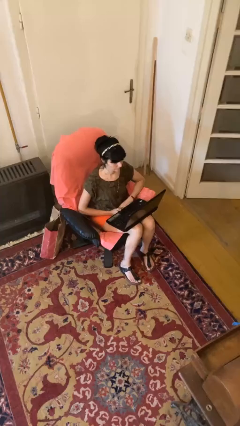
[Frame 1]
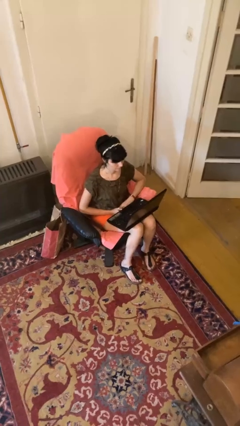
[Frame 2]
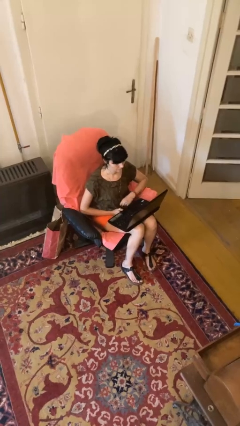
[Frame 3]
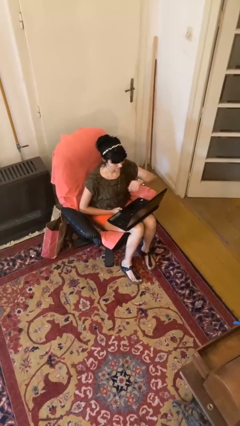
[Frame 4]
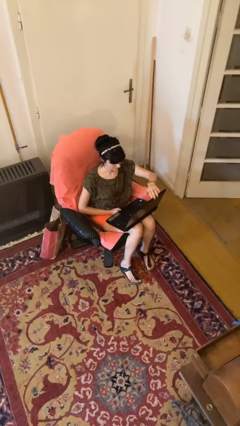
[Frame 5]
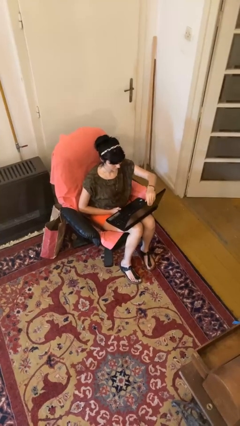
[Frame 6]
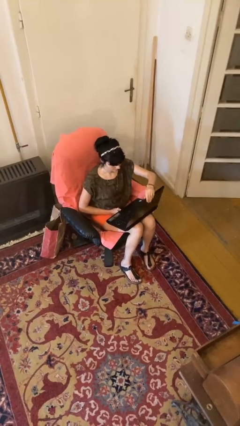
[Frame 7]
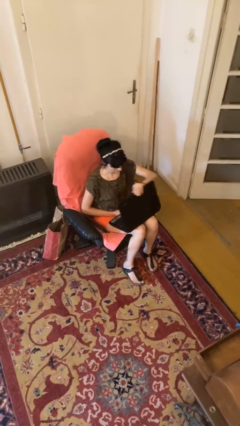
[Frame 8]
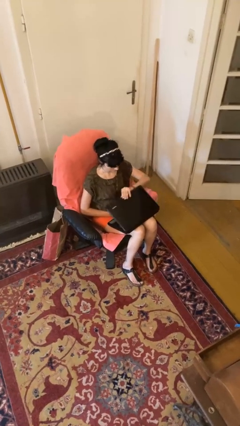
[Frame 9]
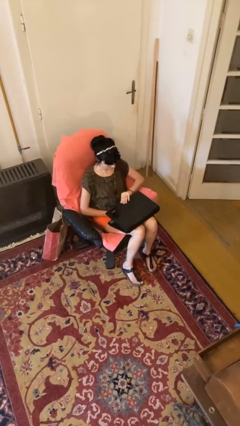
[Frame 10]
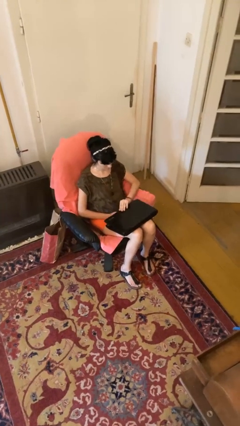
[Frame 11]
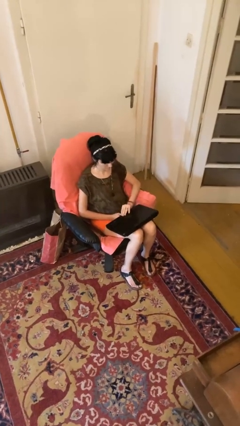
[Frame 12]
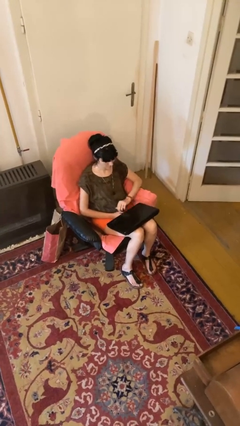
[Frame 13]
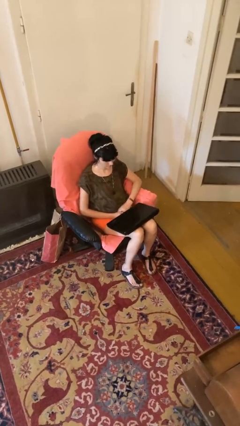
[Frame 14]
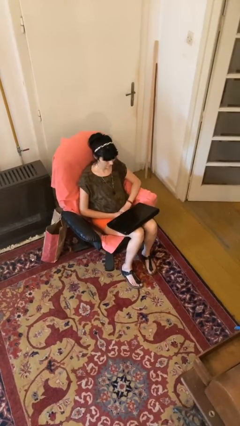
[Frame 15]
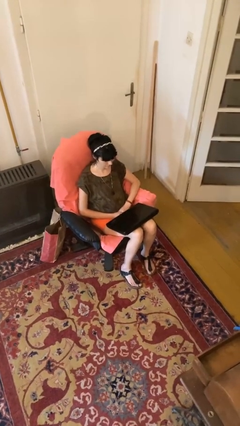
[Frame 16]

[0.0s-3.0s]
person closes laptop

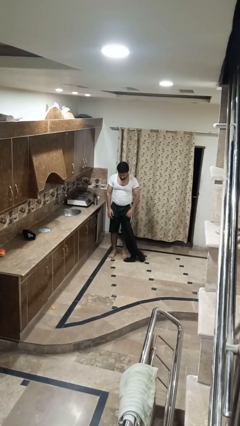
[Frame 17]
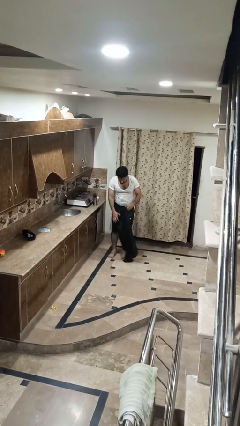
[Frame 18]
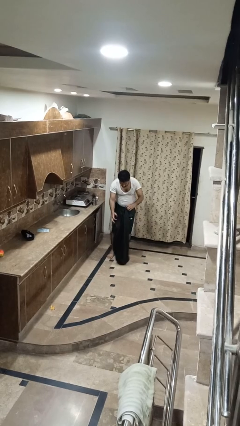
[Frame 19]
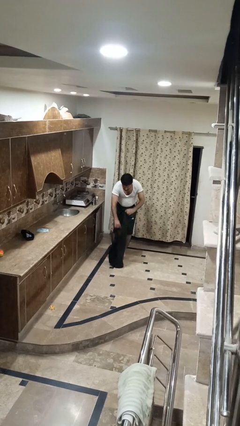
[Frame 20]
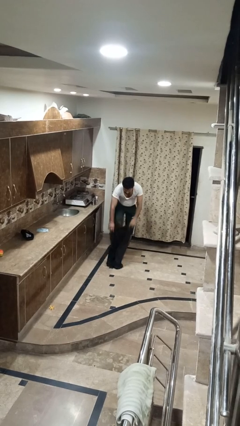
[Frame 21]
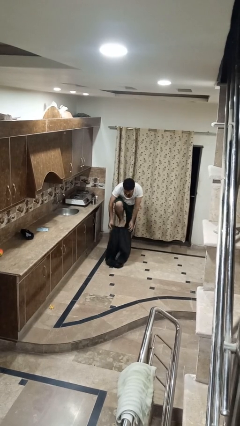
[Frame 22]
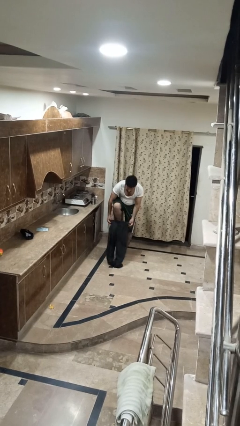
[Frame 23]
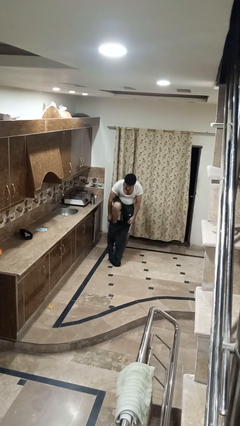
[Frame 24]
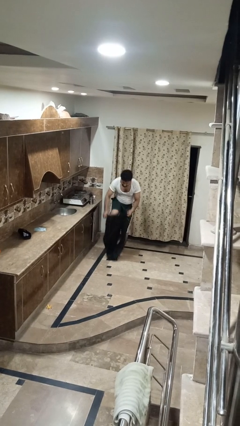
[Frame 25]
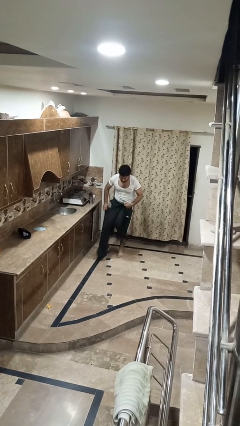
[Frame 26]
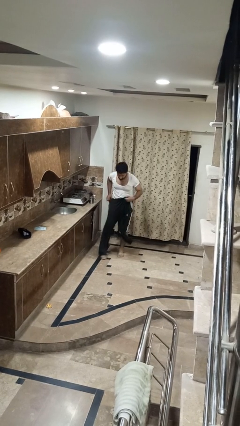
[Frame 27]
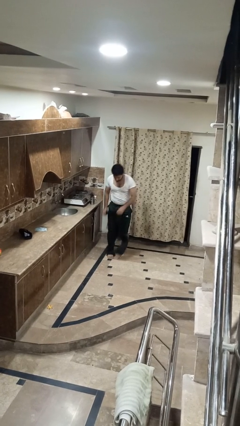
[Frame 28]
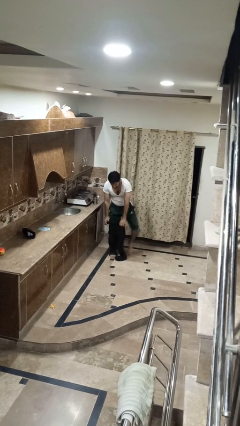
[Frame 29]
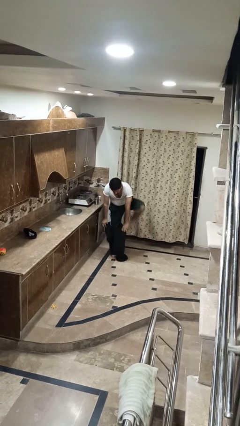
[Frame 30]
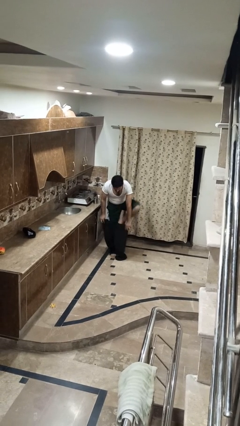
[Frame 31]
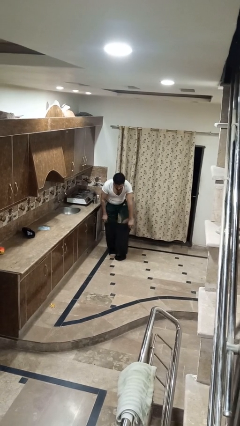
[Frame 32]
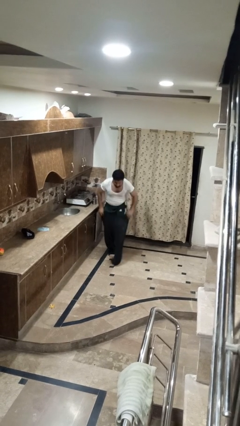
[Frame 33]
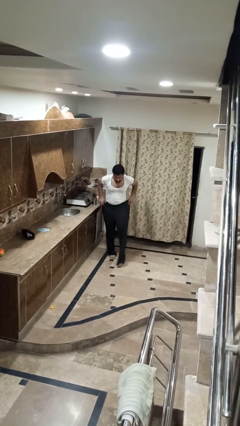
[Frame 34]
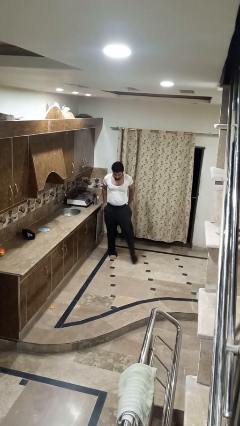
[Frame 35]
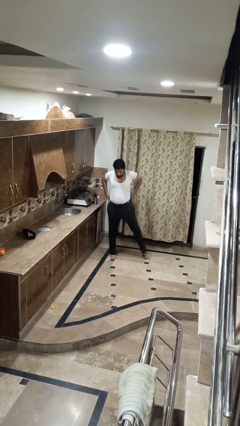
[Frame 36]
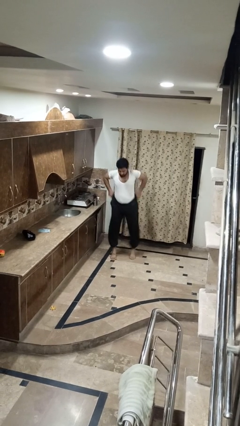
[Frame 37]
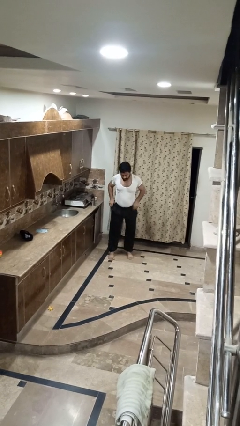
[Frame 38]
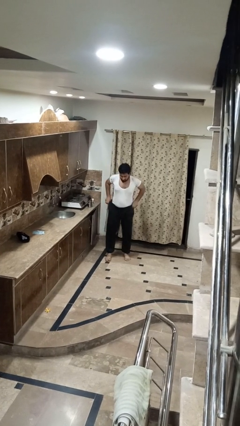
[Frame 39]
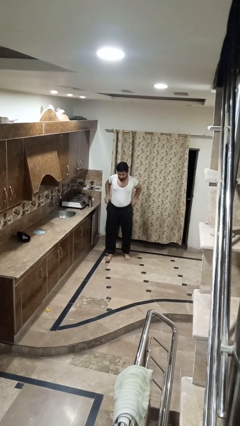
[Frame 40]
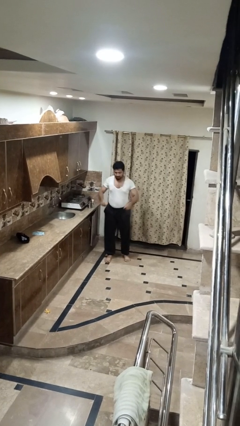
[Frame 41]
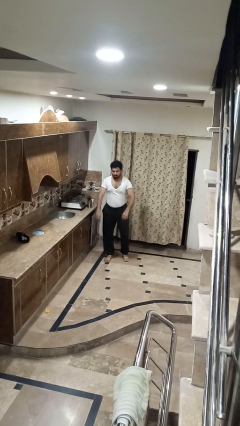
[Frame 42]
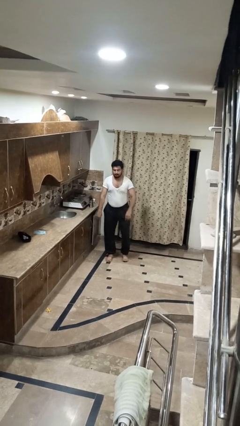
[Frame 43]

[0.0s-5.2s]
person puts on pants

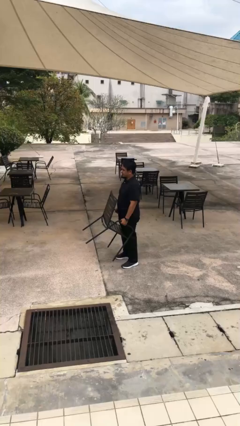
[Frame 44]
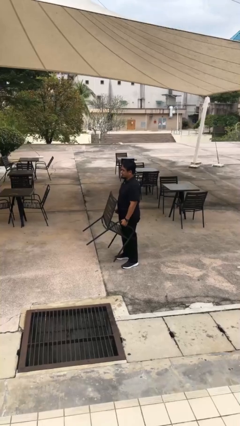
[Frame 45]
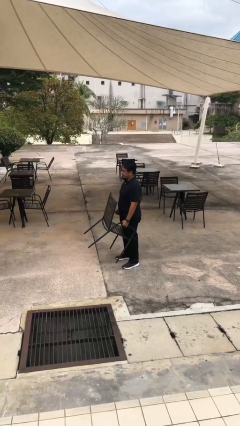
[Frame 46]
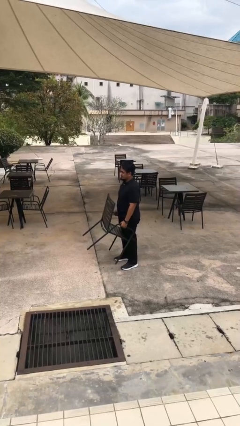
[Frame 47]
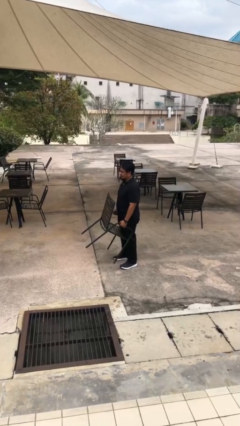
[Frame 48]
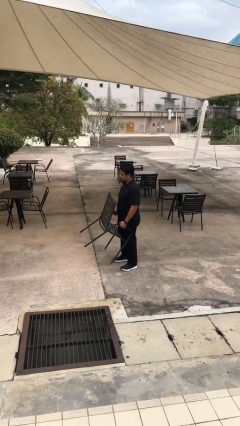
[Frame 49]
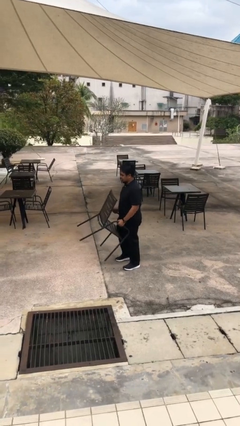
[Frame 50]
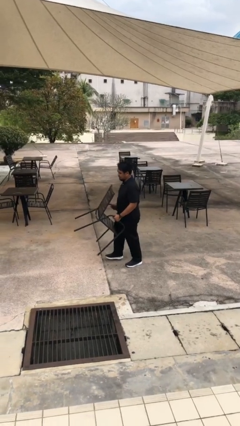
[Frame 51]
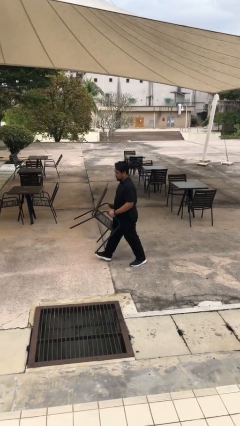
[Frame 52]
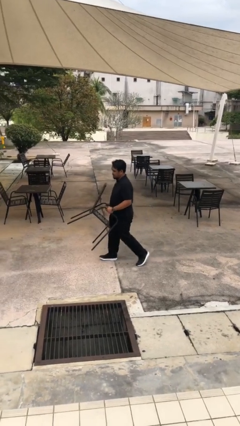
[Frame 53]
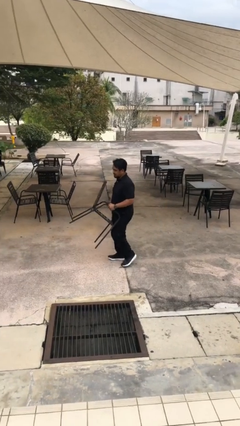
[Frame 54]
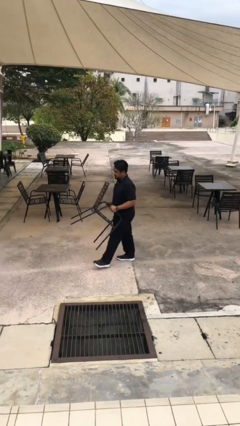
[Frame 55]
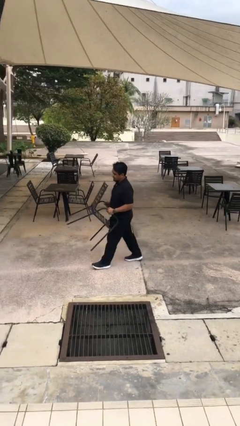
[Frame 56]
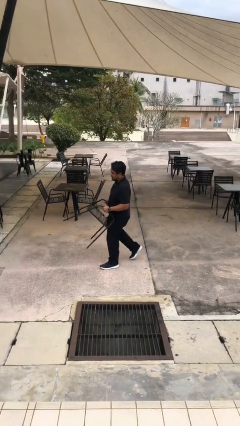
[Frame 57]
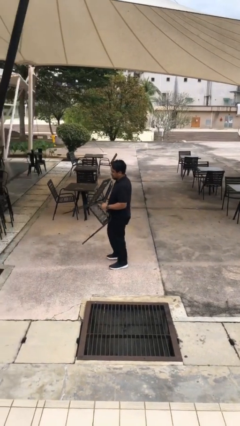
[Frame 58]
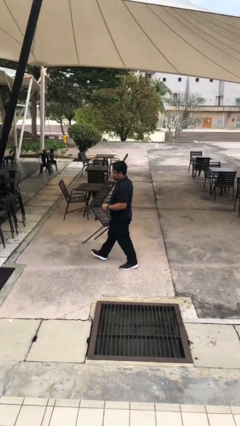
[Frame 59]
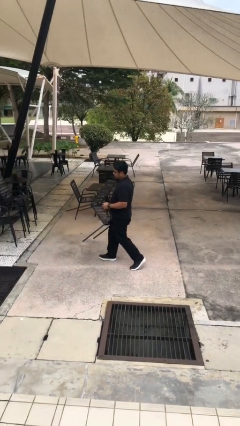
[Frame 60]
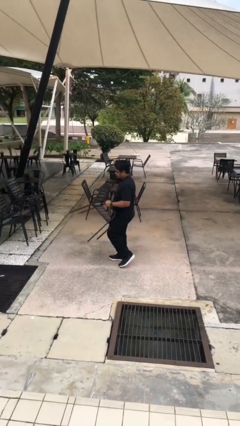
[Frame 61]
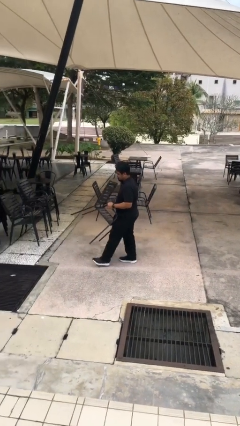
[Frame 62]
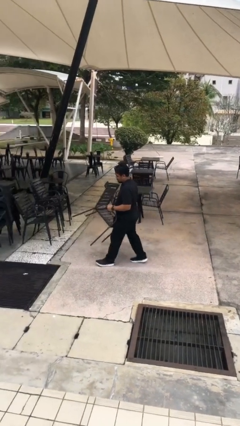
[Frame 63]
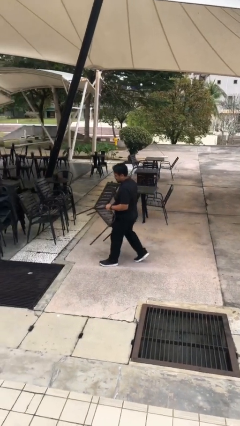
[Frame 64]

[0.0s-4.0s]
person carries heavy object

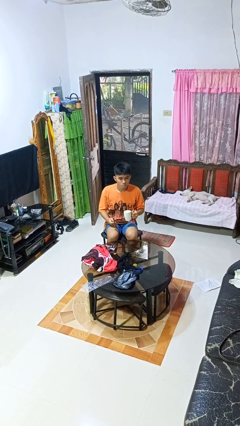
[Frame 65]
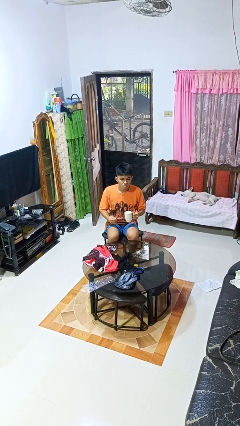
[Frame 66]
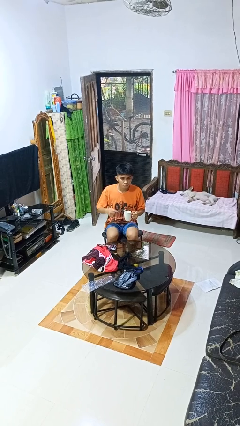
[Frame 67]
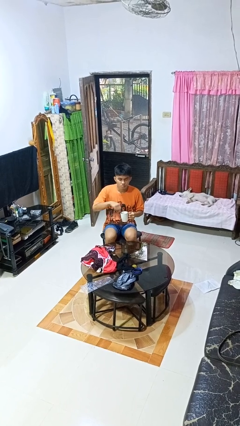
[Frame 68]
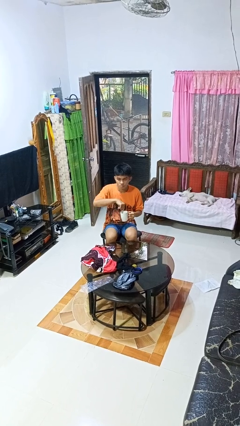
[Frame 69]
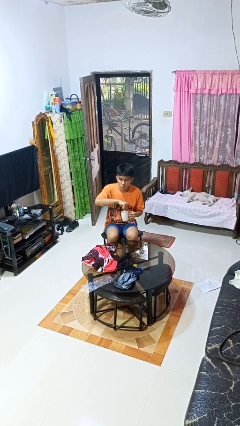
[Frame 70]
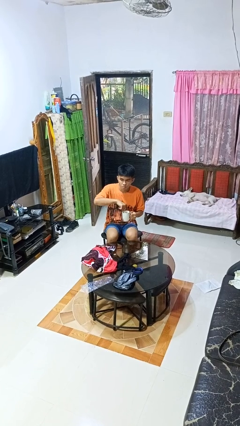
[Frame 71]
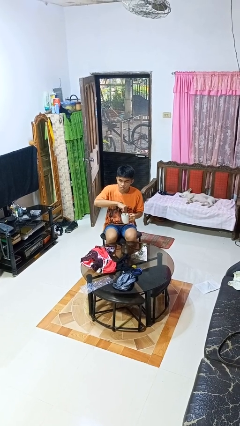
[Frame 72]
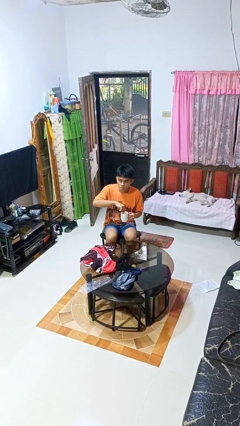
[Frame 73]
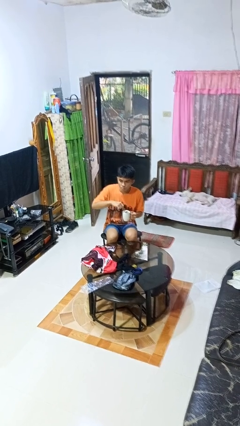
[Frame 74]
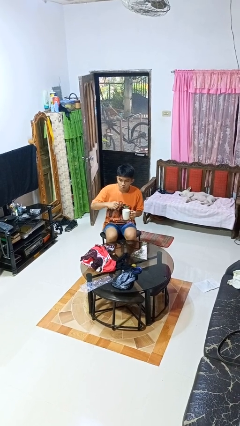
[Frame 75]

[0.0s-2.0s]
person stirs mug

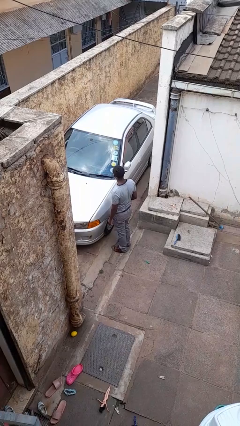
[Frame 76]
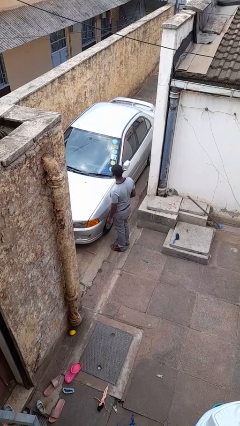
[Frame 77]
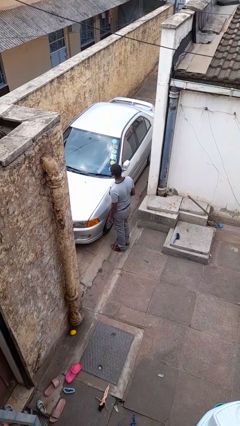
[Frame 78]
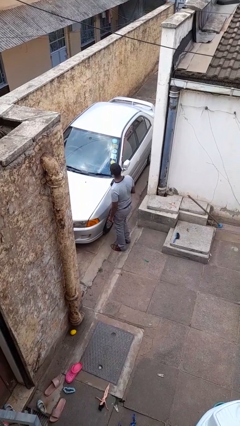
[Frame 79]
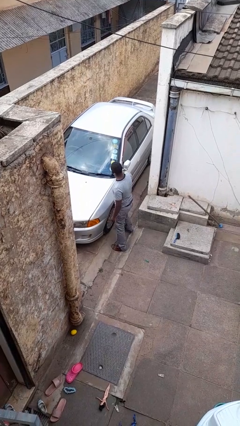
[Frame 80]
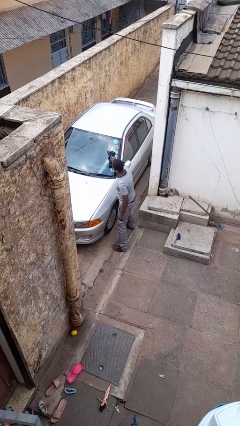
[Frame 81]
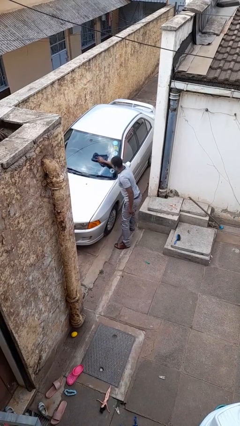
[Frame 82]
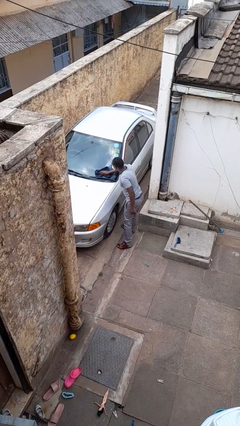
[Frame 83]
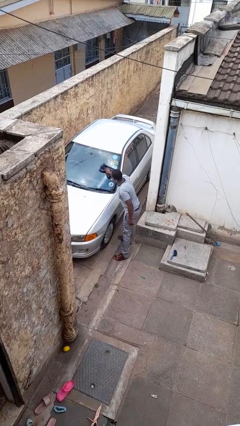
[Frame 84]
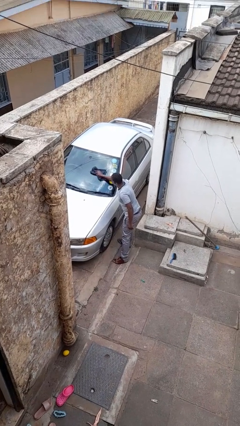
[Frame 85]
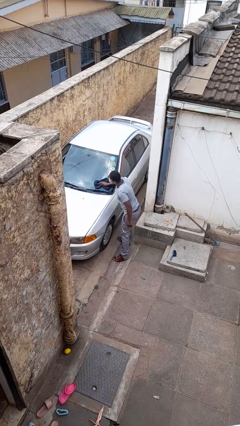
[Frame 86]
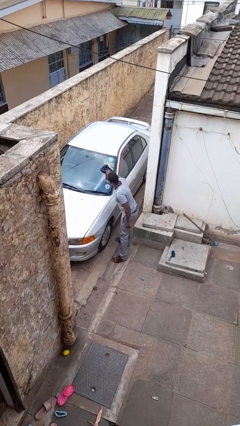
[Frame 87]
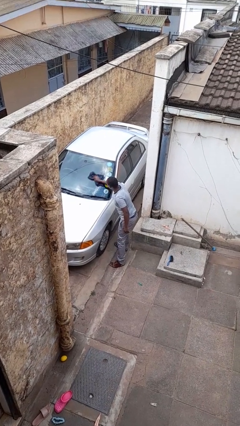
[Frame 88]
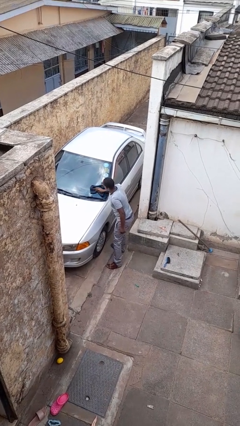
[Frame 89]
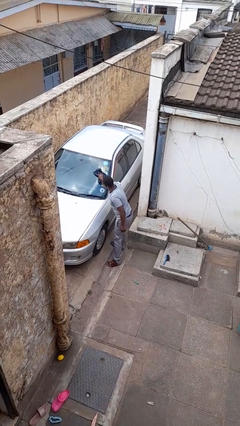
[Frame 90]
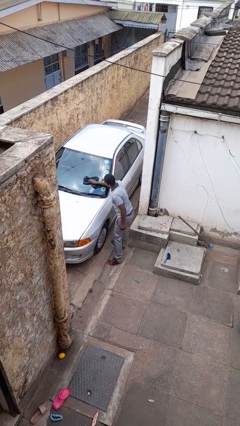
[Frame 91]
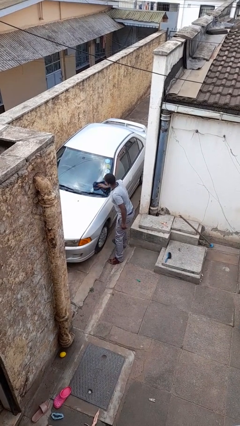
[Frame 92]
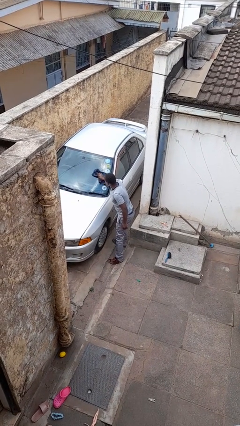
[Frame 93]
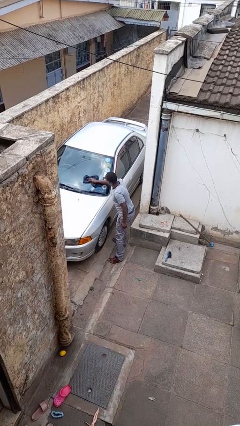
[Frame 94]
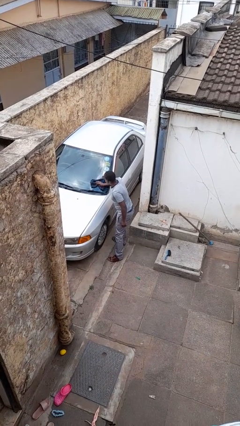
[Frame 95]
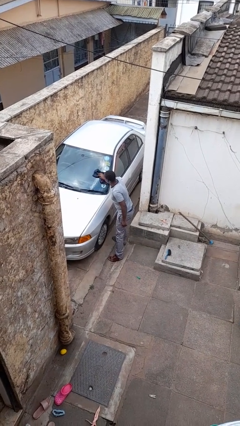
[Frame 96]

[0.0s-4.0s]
person polishes car with rag
